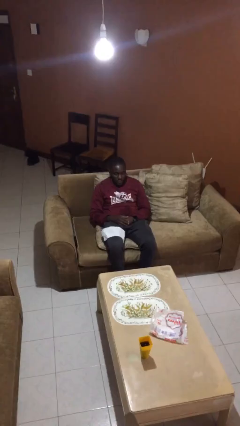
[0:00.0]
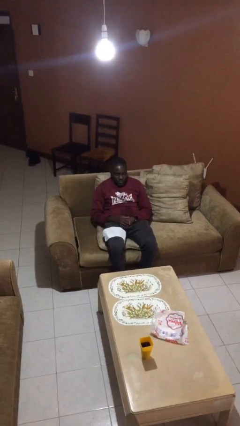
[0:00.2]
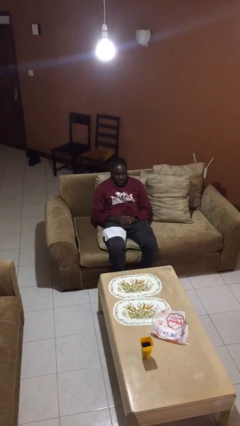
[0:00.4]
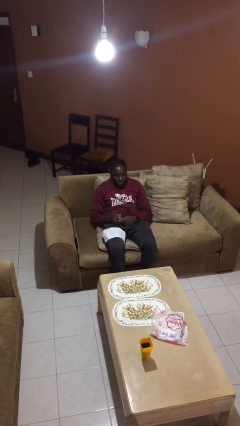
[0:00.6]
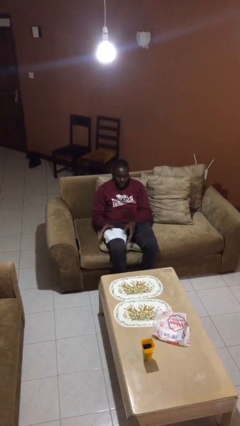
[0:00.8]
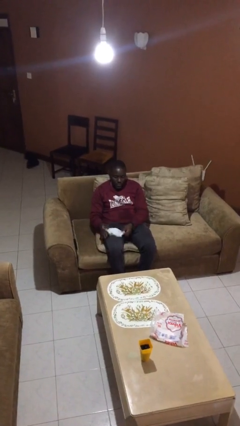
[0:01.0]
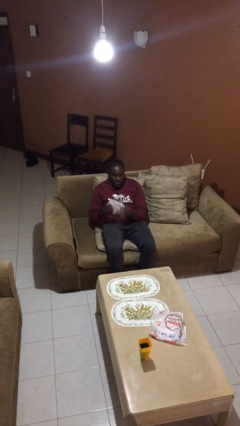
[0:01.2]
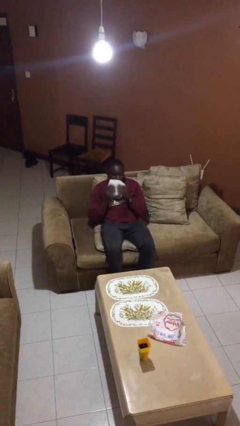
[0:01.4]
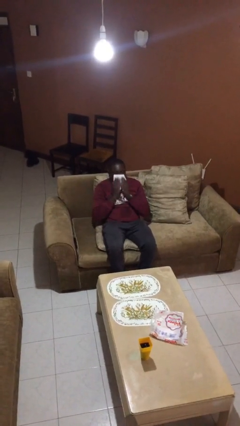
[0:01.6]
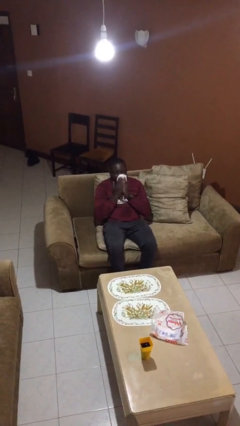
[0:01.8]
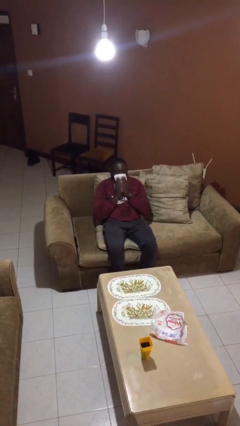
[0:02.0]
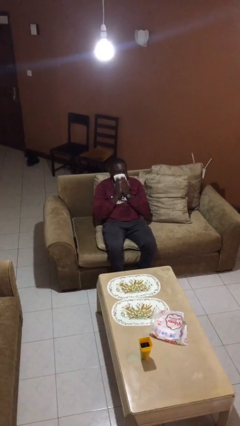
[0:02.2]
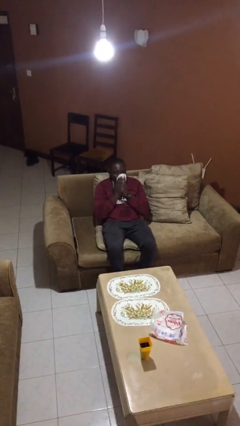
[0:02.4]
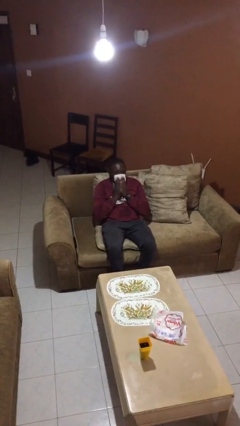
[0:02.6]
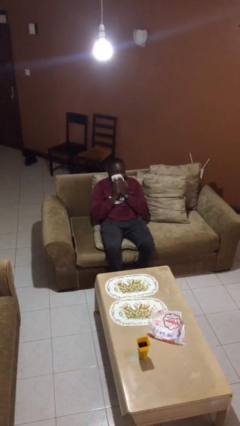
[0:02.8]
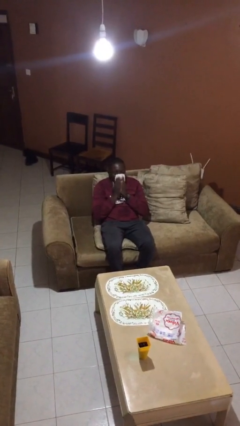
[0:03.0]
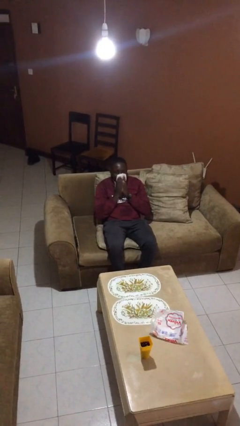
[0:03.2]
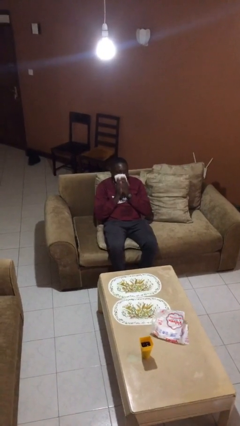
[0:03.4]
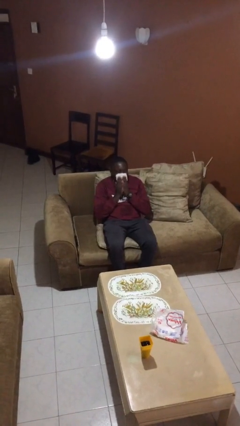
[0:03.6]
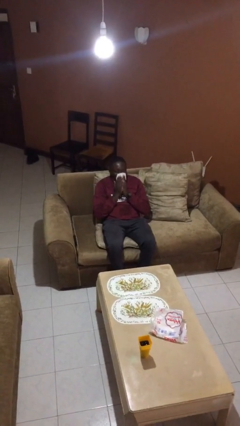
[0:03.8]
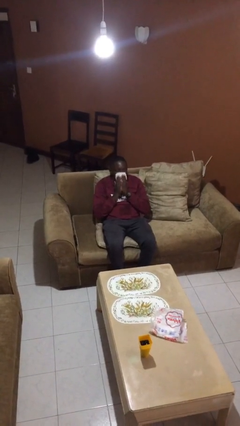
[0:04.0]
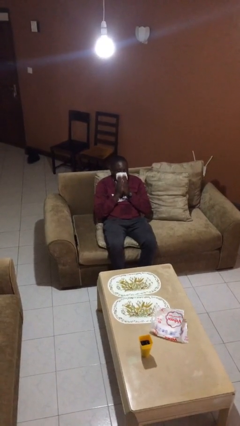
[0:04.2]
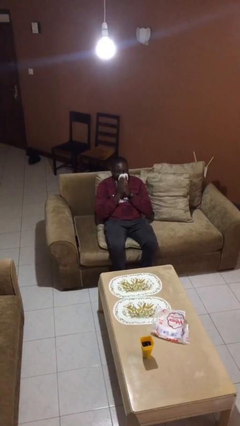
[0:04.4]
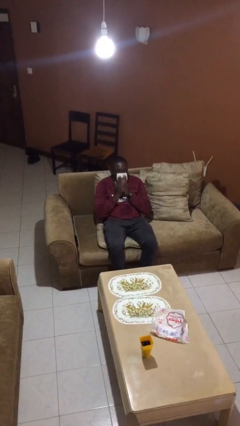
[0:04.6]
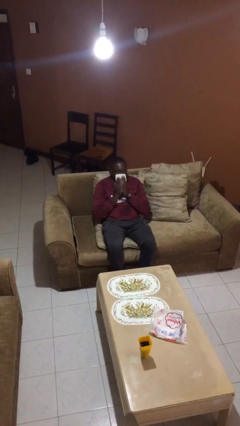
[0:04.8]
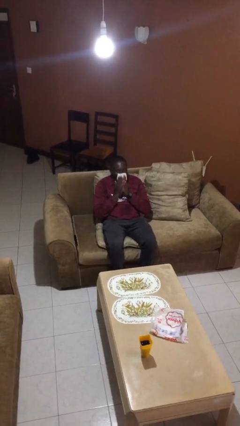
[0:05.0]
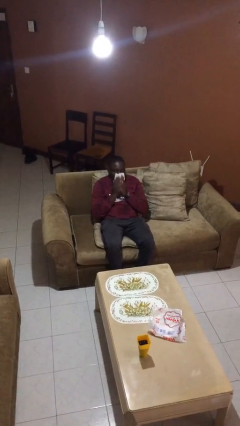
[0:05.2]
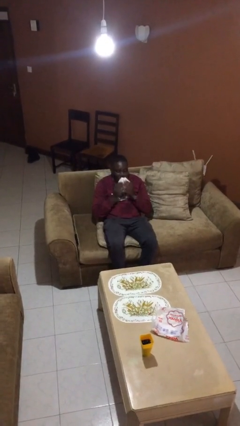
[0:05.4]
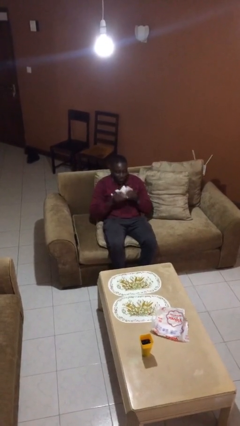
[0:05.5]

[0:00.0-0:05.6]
person wipes mouth with napkin

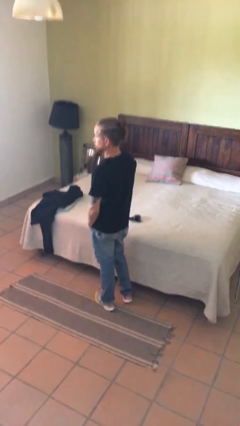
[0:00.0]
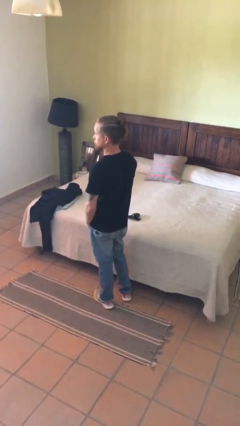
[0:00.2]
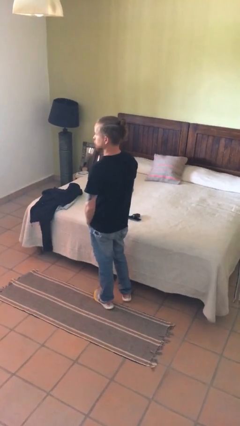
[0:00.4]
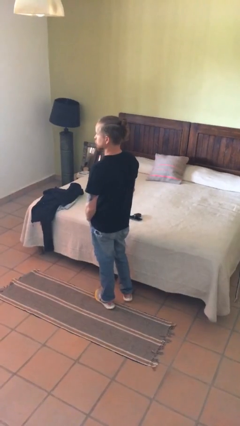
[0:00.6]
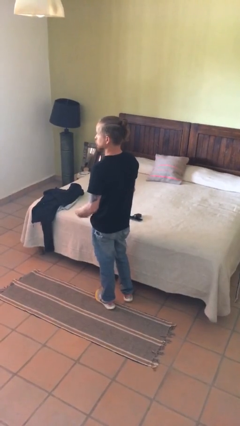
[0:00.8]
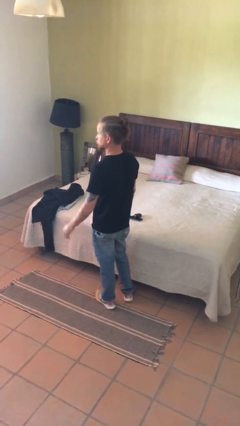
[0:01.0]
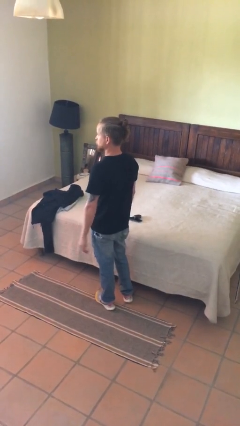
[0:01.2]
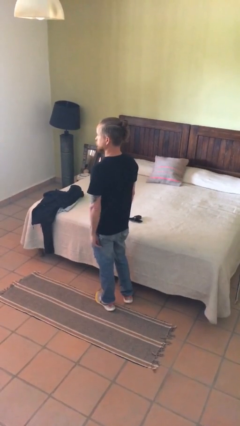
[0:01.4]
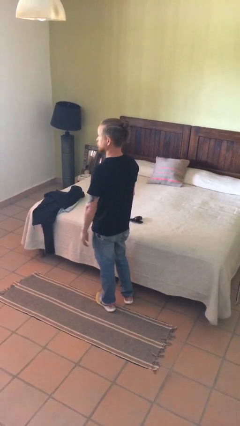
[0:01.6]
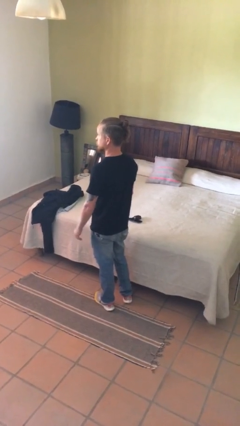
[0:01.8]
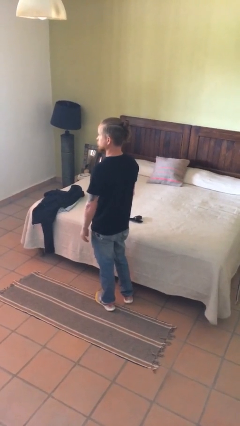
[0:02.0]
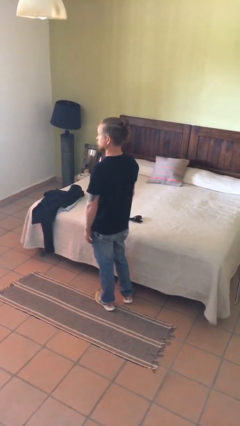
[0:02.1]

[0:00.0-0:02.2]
person puts hands in back pockets

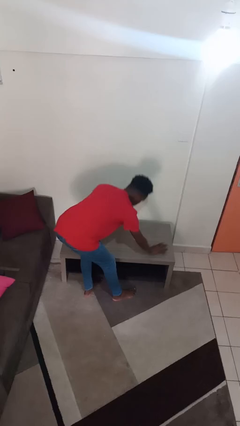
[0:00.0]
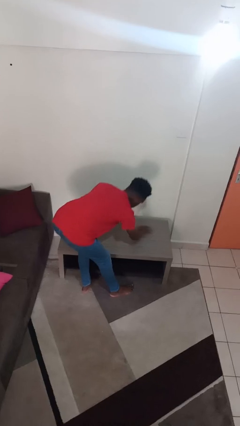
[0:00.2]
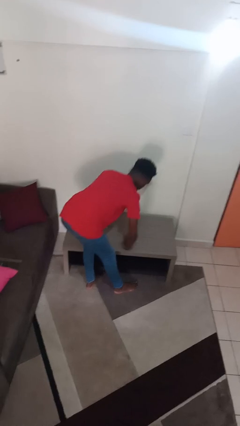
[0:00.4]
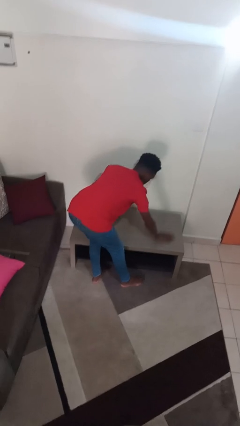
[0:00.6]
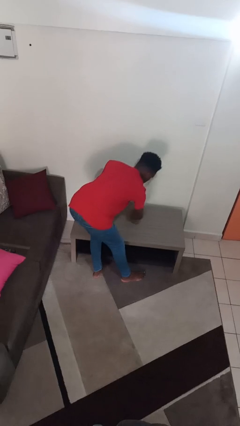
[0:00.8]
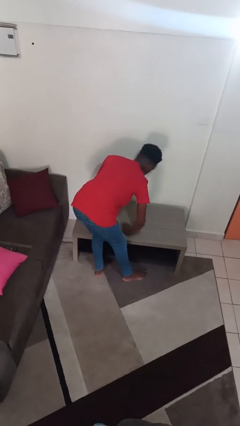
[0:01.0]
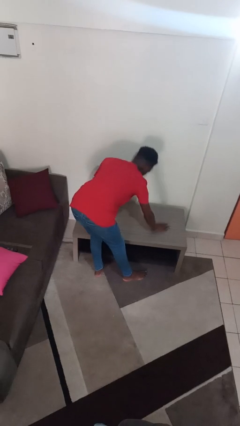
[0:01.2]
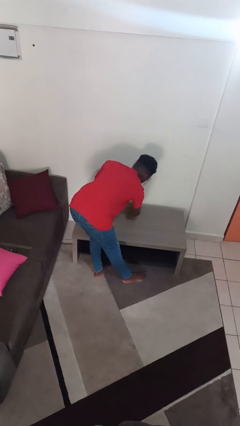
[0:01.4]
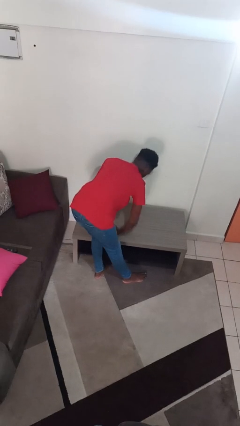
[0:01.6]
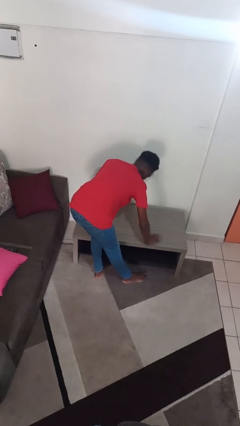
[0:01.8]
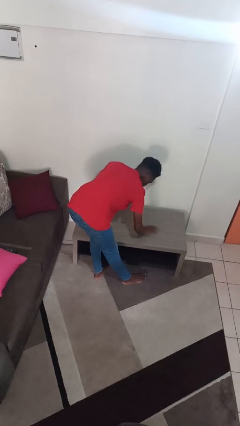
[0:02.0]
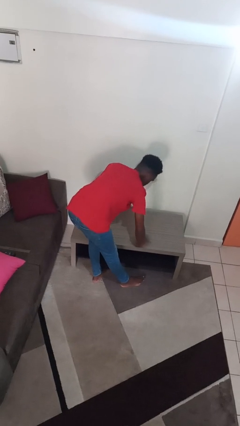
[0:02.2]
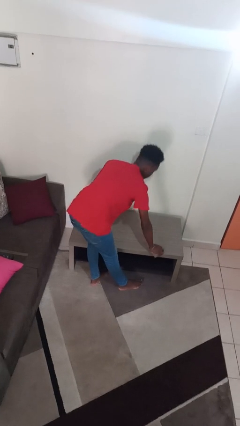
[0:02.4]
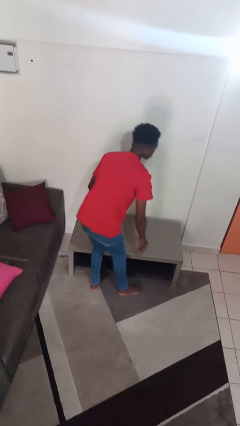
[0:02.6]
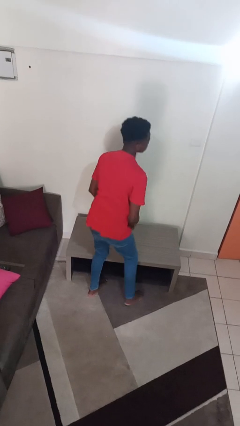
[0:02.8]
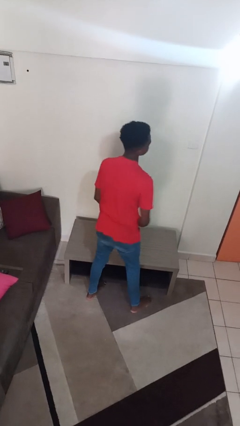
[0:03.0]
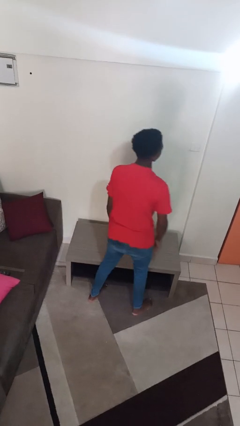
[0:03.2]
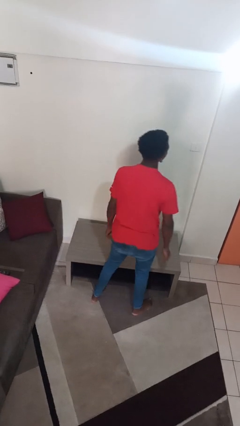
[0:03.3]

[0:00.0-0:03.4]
person cleans table with rag

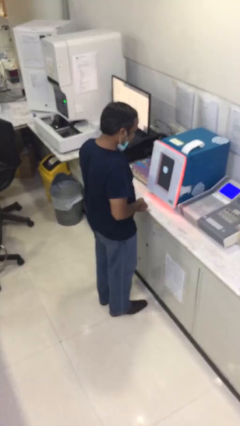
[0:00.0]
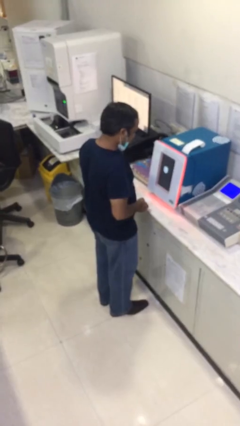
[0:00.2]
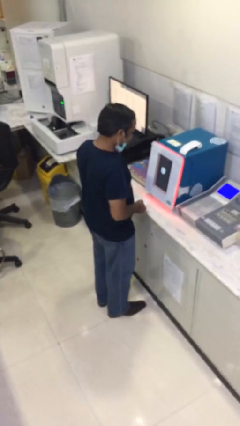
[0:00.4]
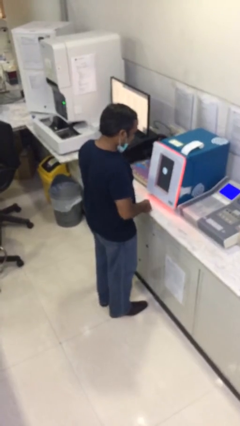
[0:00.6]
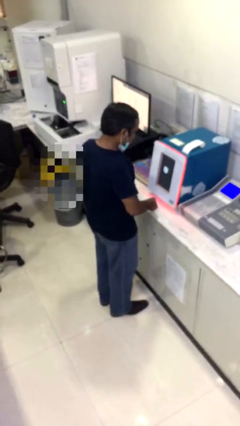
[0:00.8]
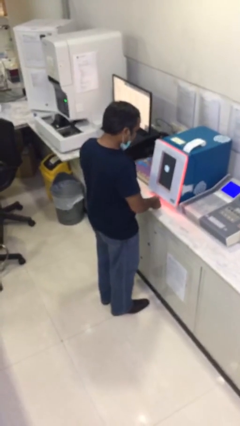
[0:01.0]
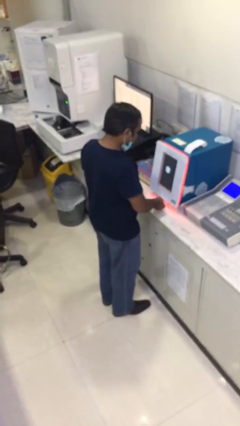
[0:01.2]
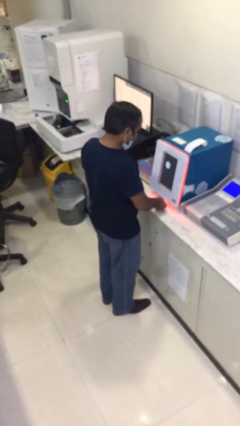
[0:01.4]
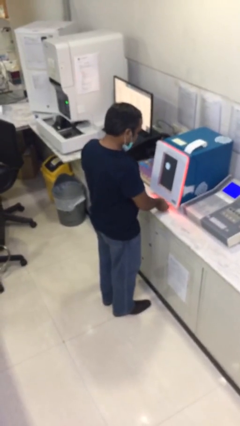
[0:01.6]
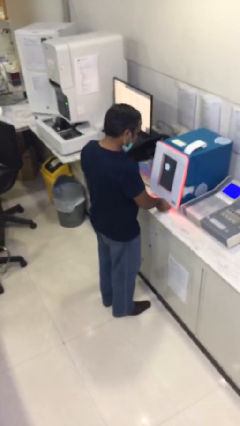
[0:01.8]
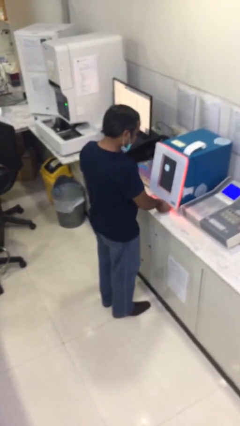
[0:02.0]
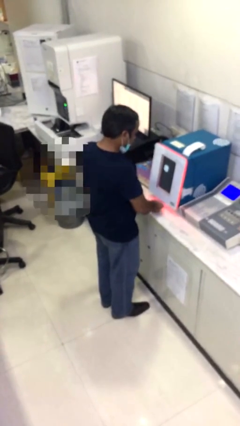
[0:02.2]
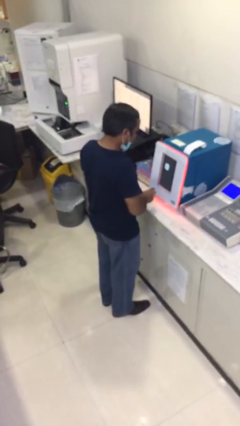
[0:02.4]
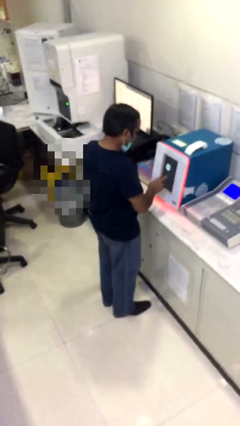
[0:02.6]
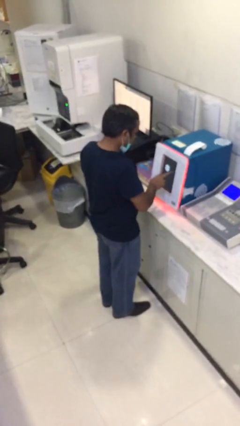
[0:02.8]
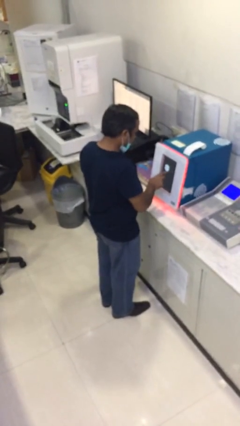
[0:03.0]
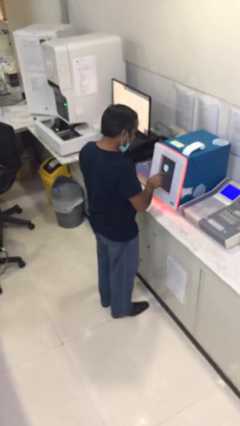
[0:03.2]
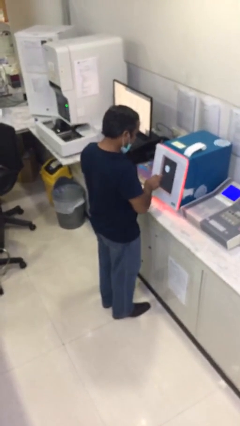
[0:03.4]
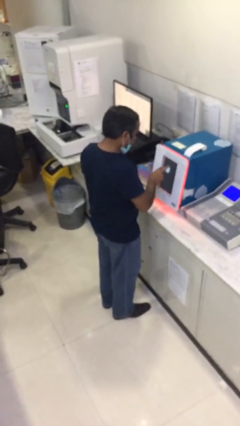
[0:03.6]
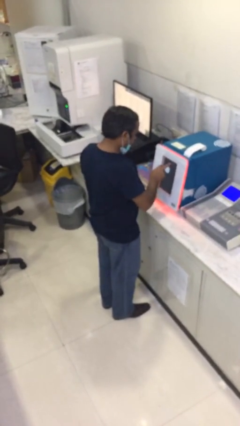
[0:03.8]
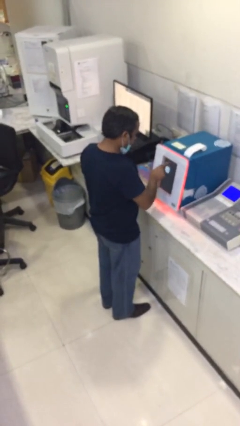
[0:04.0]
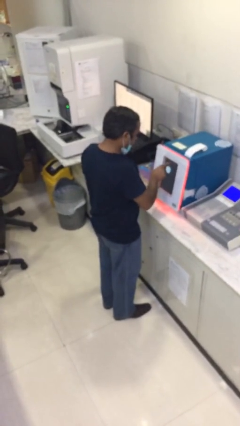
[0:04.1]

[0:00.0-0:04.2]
person purchases from machine

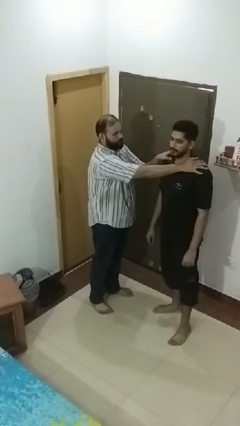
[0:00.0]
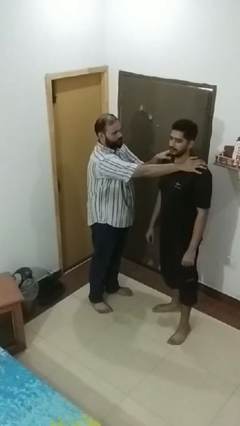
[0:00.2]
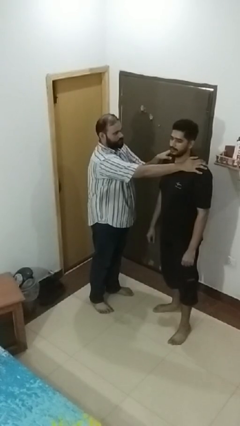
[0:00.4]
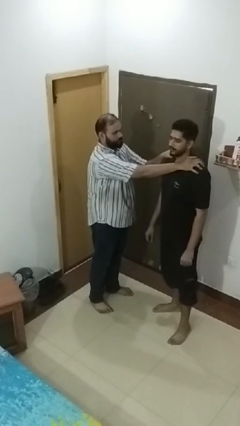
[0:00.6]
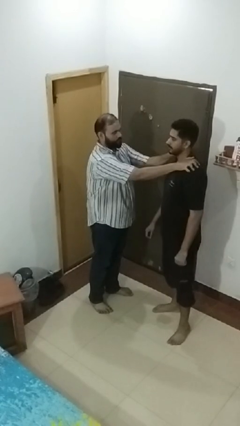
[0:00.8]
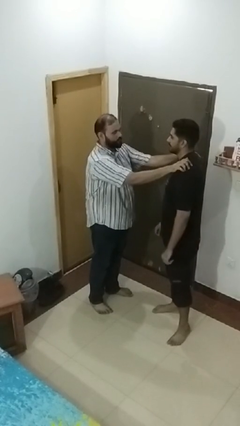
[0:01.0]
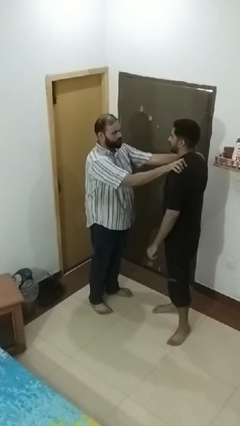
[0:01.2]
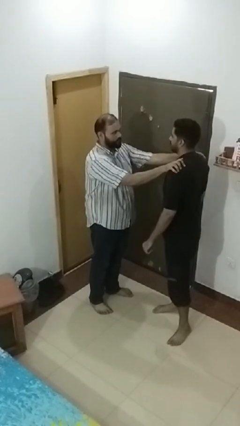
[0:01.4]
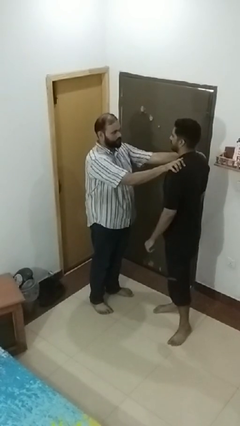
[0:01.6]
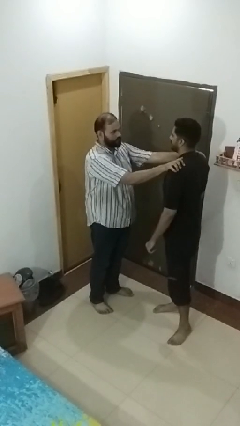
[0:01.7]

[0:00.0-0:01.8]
person spins person around

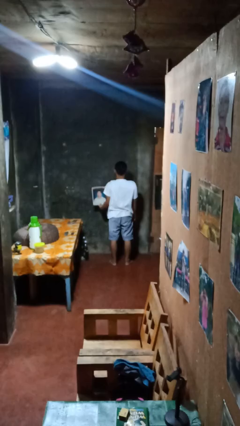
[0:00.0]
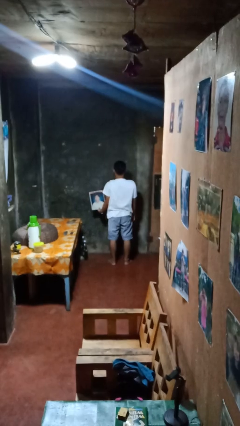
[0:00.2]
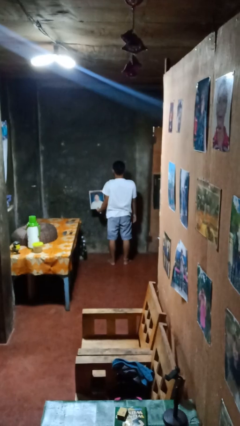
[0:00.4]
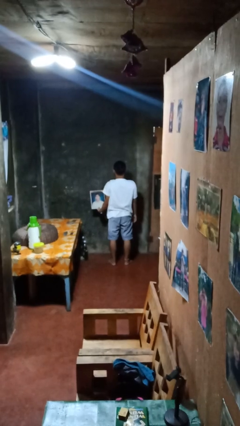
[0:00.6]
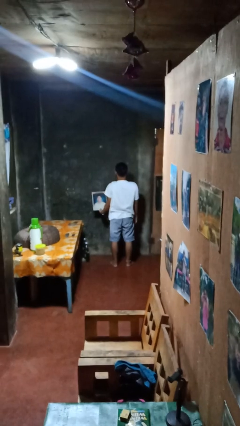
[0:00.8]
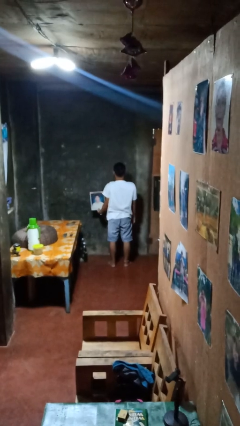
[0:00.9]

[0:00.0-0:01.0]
person takes down picture frame
